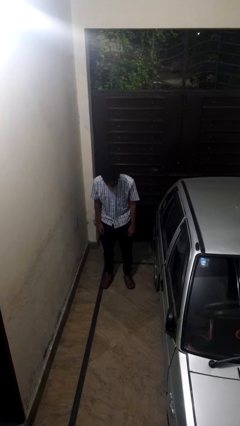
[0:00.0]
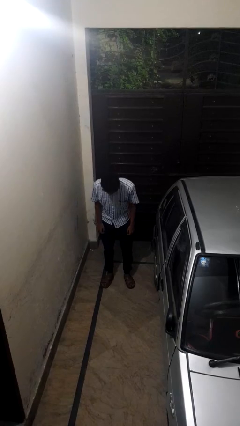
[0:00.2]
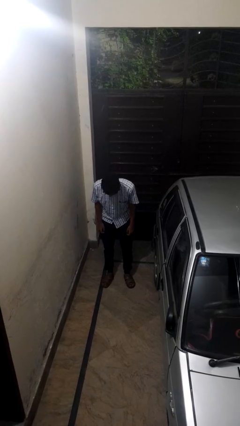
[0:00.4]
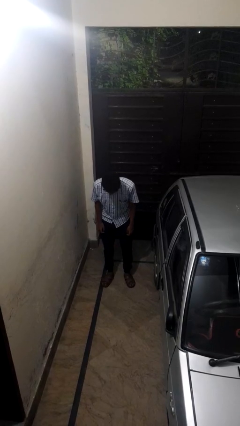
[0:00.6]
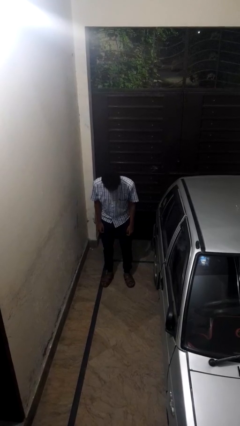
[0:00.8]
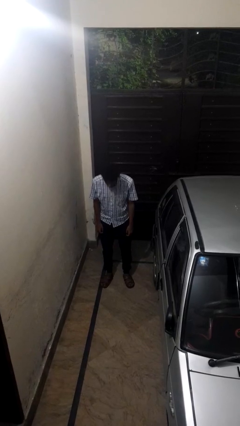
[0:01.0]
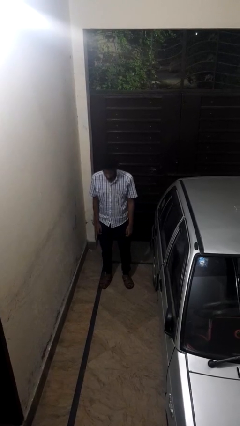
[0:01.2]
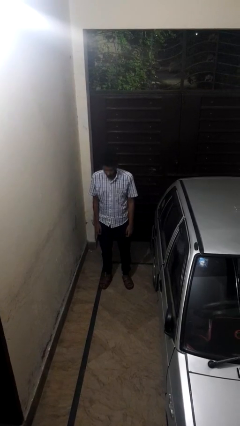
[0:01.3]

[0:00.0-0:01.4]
person bows

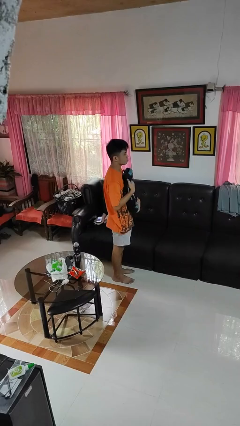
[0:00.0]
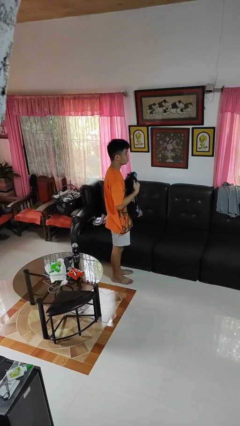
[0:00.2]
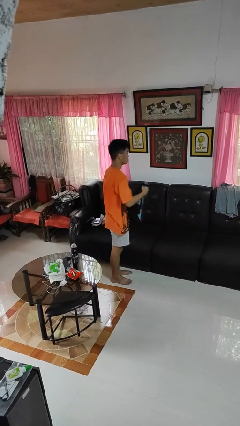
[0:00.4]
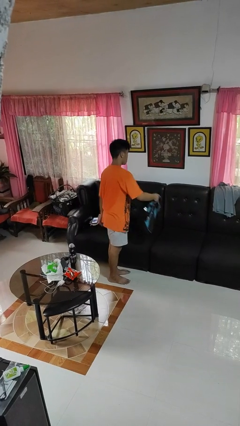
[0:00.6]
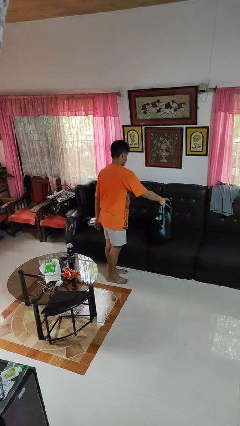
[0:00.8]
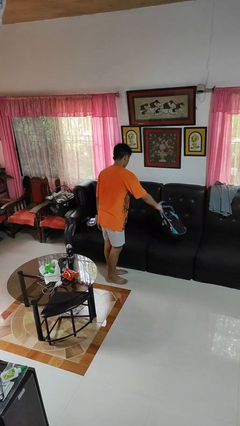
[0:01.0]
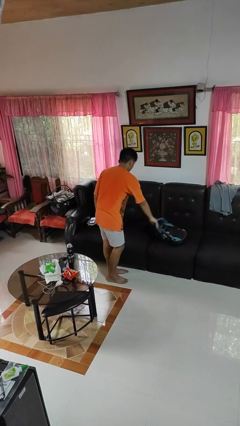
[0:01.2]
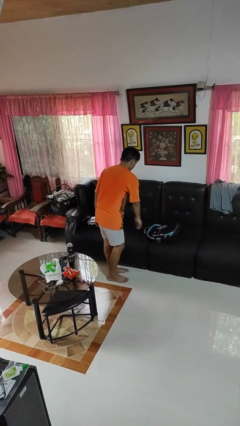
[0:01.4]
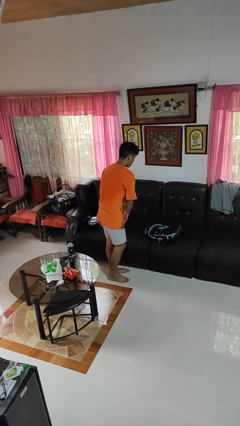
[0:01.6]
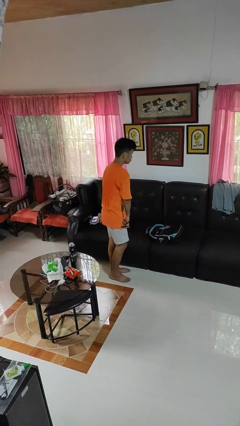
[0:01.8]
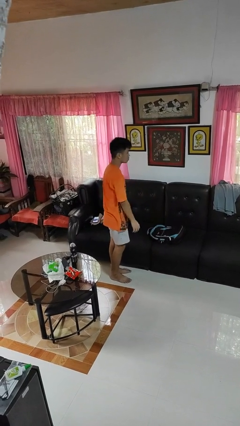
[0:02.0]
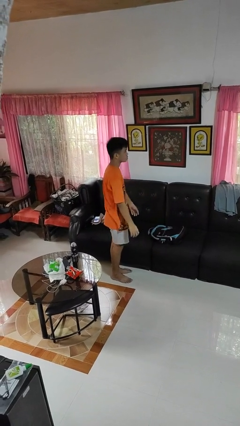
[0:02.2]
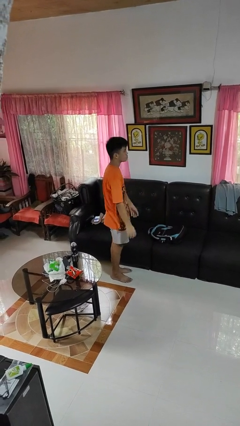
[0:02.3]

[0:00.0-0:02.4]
person puts down object on couch

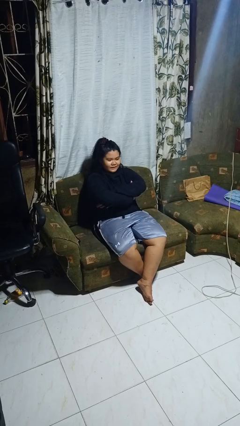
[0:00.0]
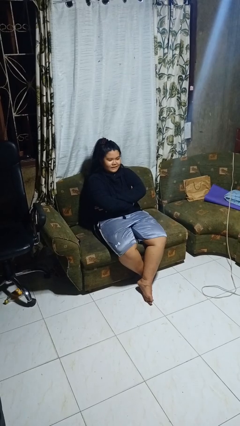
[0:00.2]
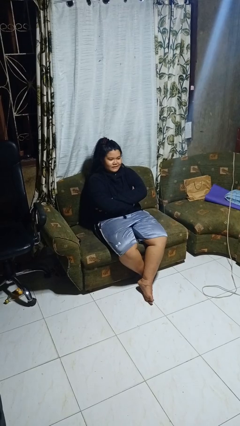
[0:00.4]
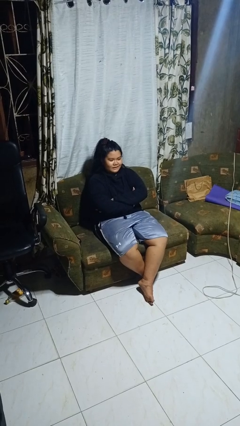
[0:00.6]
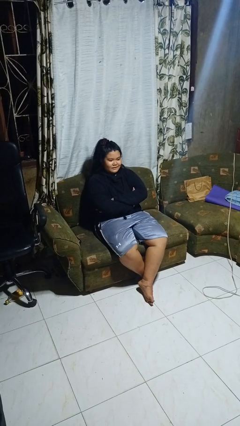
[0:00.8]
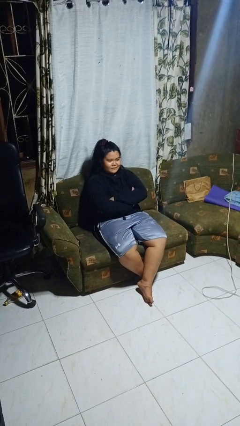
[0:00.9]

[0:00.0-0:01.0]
person crosses arms

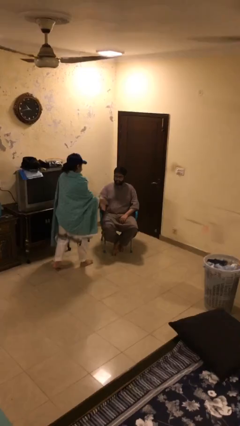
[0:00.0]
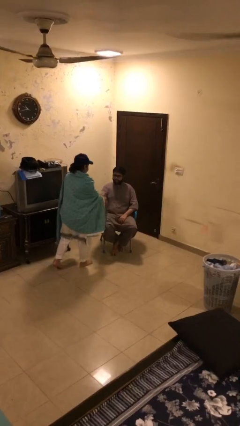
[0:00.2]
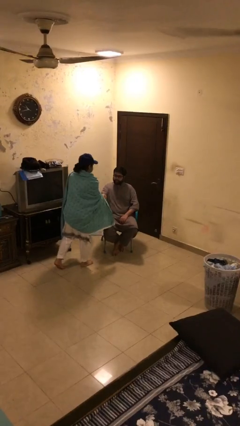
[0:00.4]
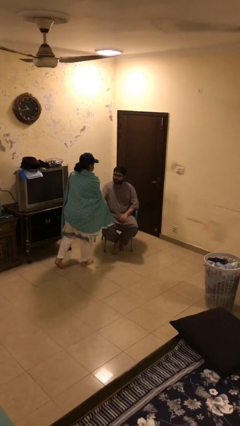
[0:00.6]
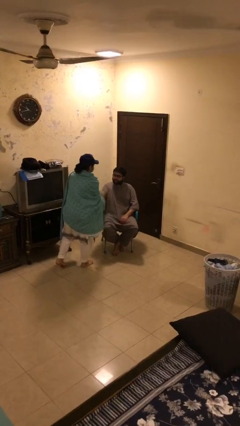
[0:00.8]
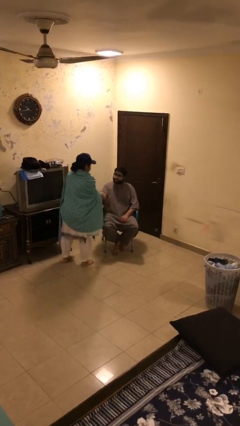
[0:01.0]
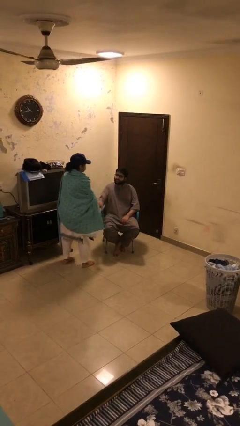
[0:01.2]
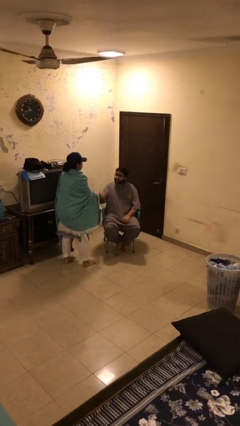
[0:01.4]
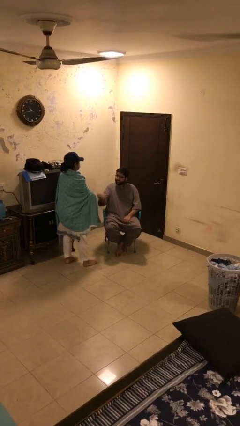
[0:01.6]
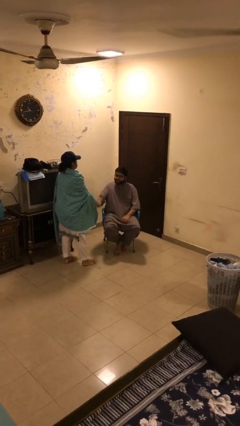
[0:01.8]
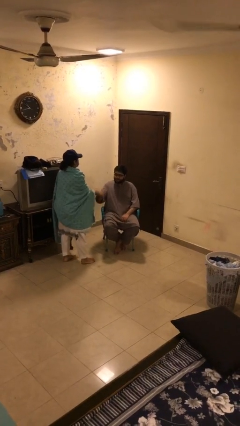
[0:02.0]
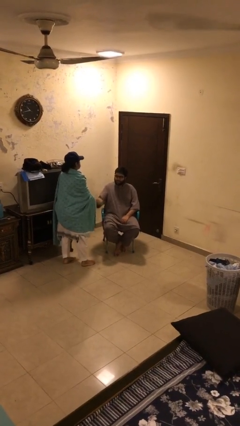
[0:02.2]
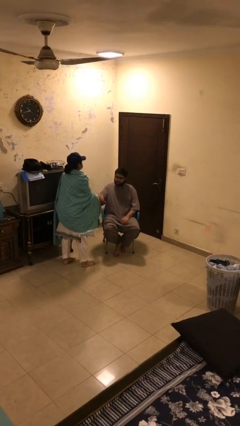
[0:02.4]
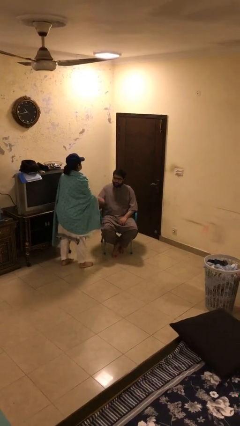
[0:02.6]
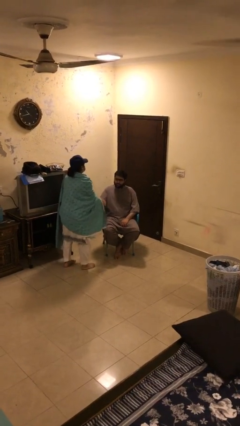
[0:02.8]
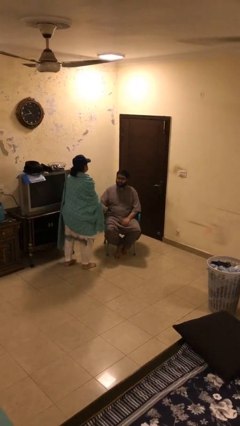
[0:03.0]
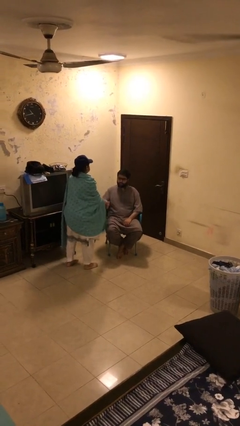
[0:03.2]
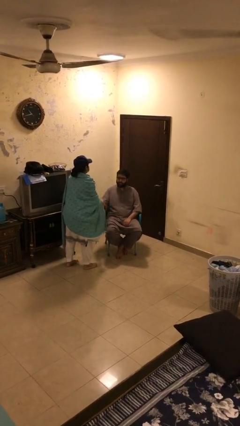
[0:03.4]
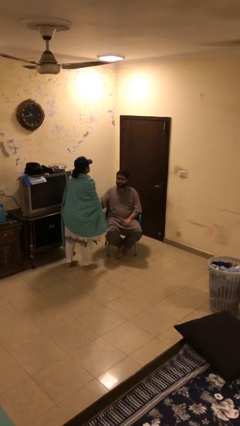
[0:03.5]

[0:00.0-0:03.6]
person shakes hand

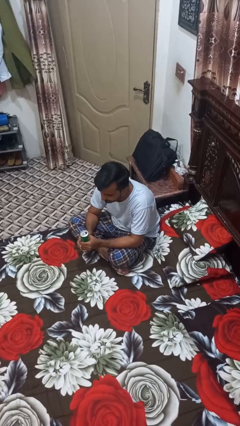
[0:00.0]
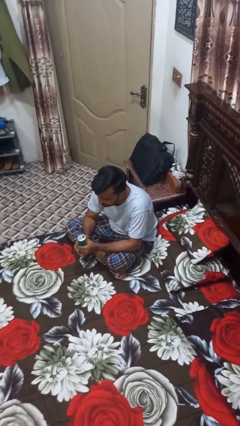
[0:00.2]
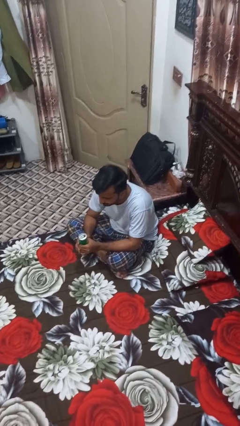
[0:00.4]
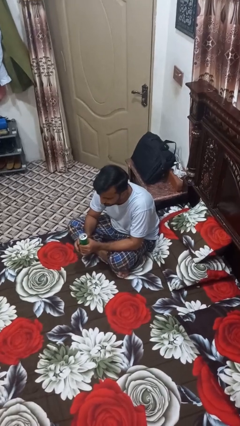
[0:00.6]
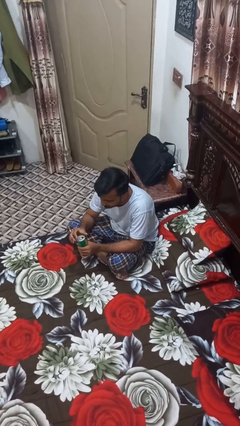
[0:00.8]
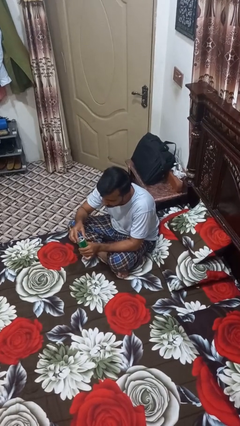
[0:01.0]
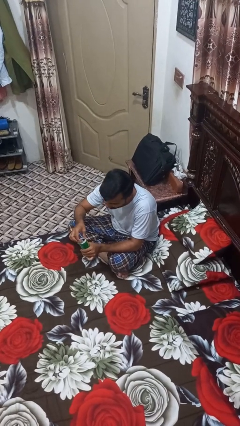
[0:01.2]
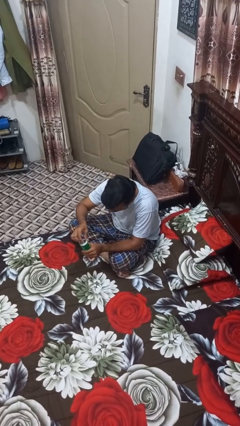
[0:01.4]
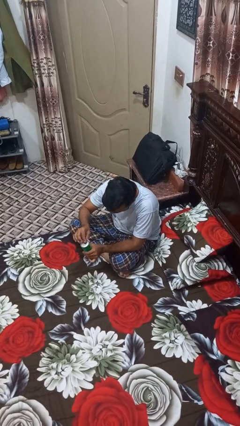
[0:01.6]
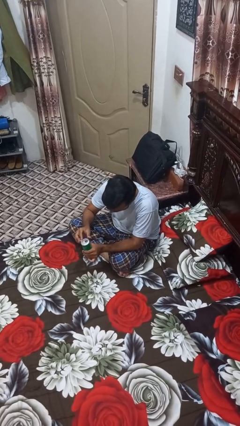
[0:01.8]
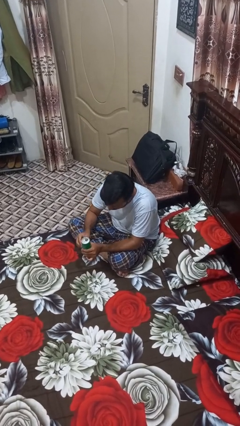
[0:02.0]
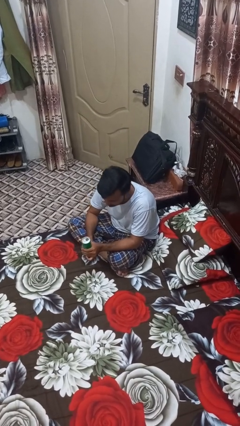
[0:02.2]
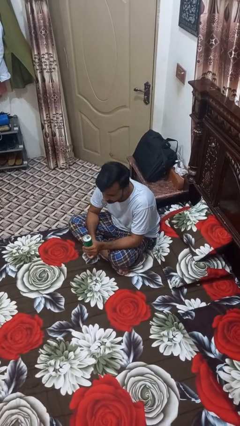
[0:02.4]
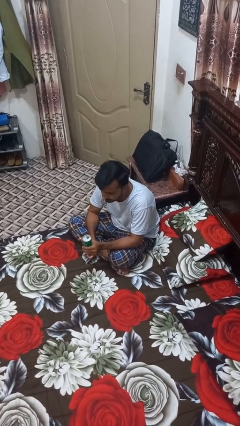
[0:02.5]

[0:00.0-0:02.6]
person opens can with can opener

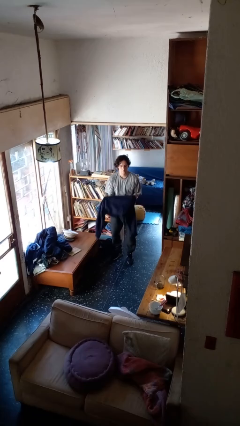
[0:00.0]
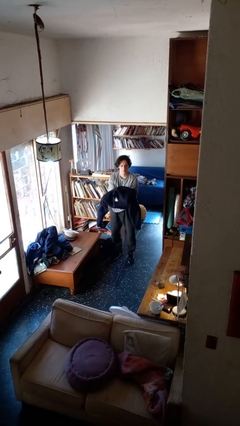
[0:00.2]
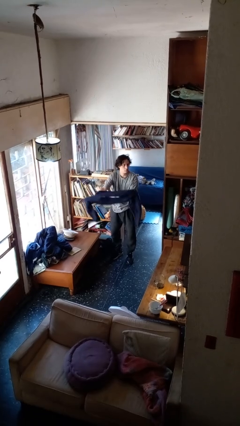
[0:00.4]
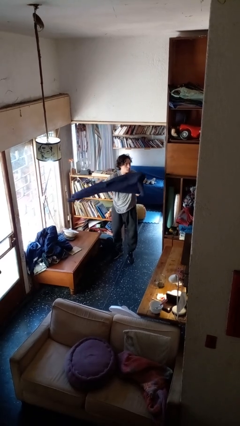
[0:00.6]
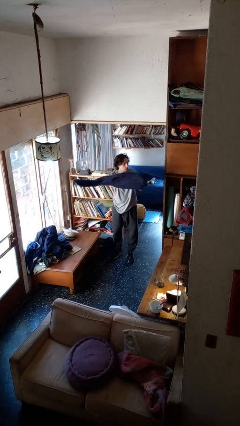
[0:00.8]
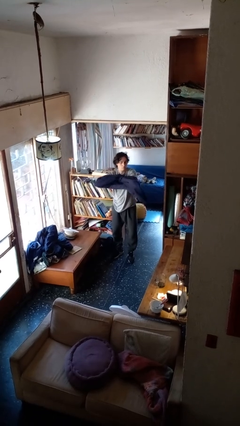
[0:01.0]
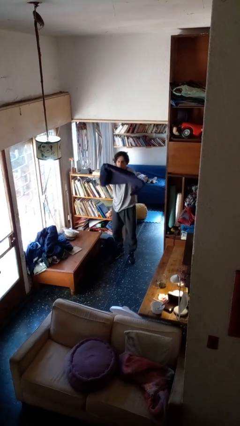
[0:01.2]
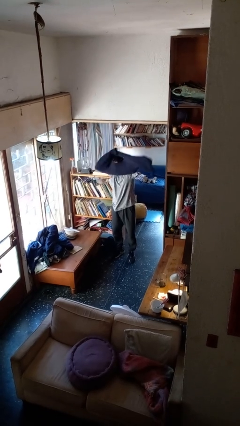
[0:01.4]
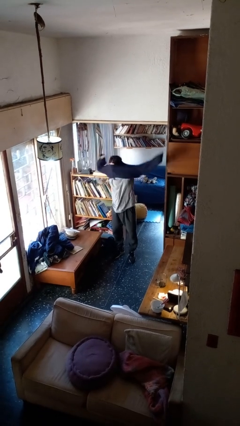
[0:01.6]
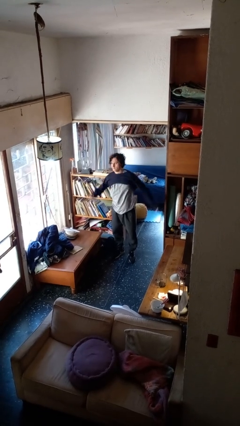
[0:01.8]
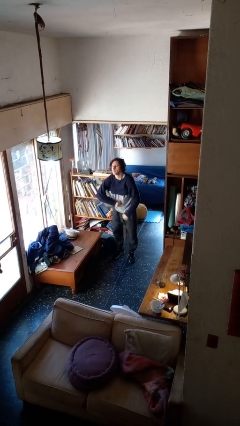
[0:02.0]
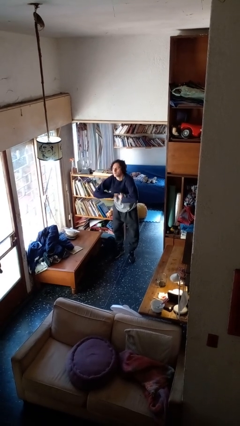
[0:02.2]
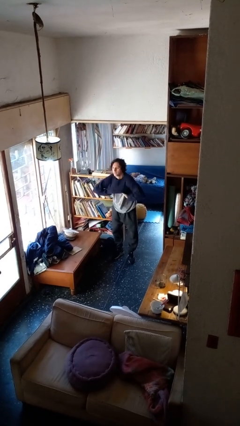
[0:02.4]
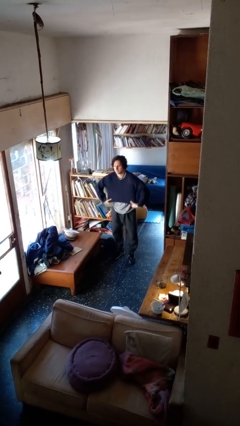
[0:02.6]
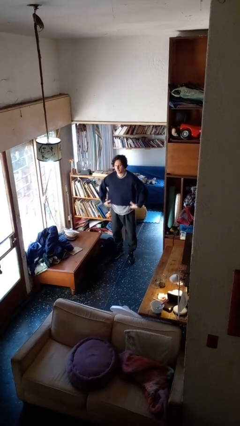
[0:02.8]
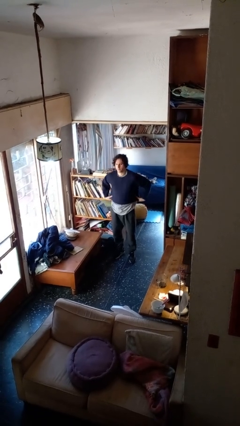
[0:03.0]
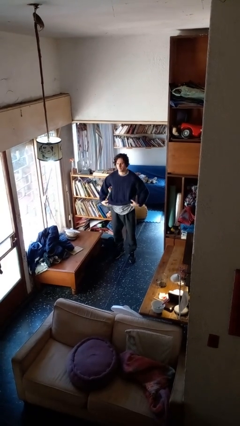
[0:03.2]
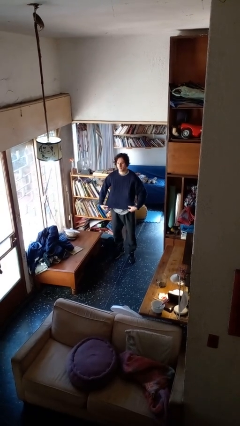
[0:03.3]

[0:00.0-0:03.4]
person puts on shirt

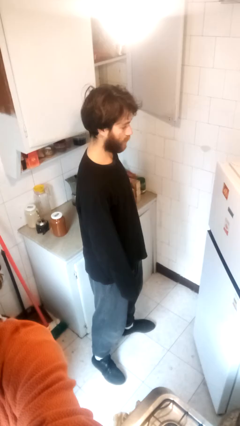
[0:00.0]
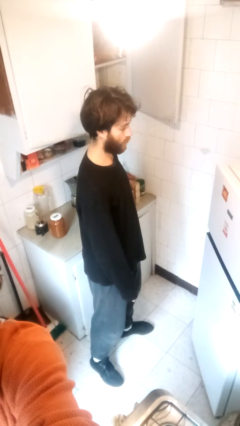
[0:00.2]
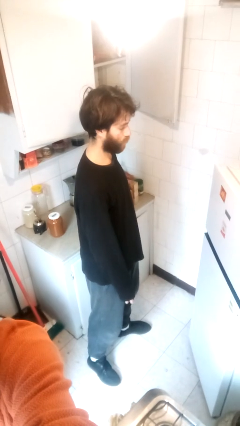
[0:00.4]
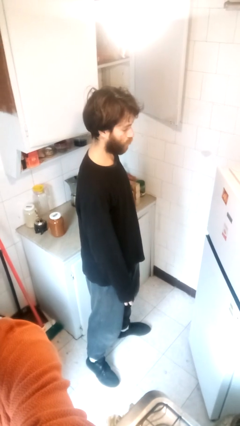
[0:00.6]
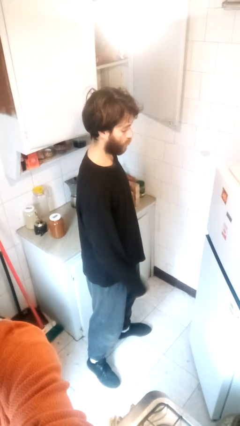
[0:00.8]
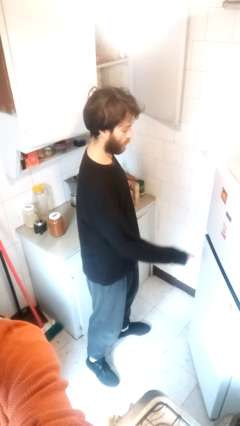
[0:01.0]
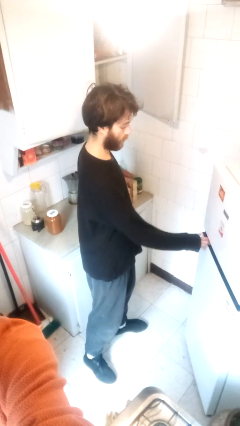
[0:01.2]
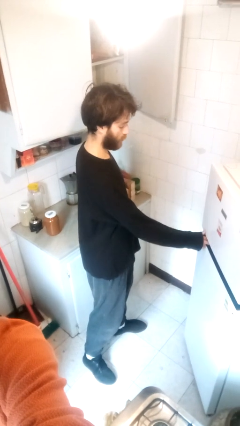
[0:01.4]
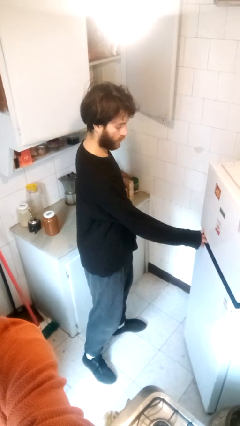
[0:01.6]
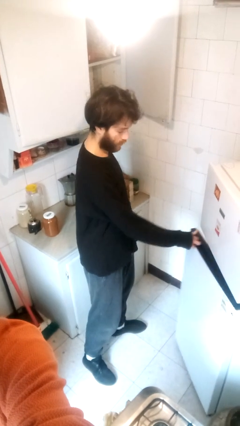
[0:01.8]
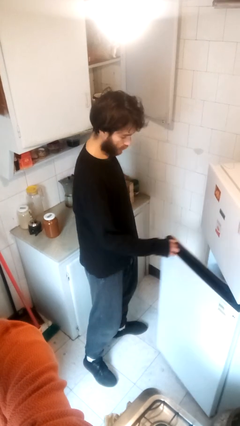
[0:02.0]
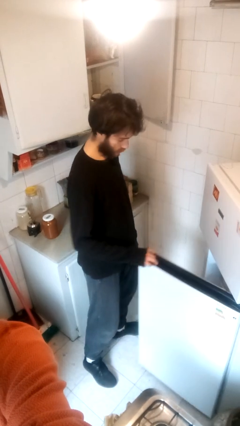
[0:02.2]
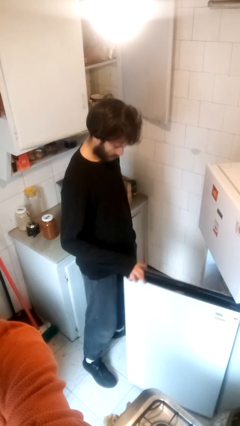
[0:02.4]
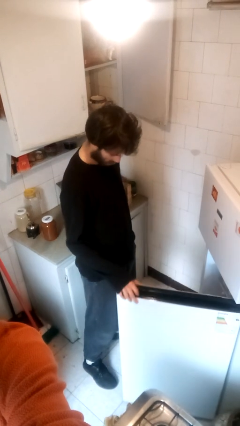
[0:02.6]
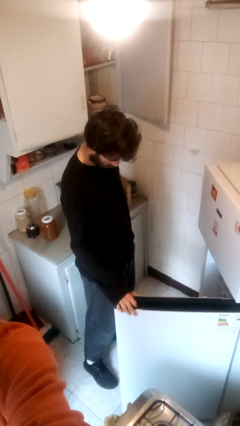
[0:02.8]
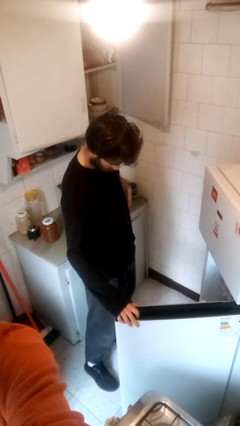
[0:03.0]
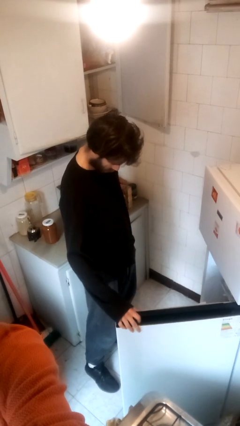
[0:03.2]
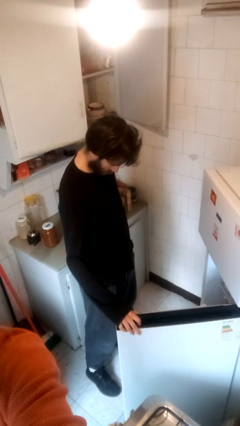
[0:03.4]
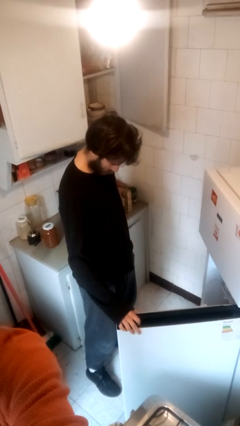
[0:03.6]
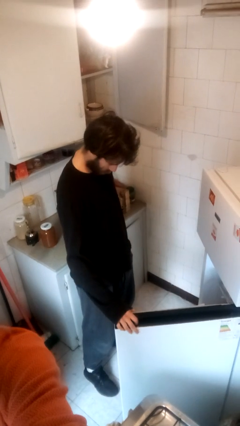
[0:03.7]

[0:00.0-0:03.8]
person opens refrigerator
